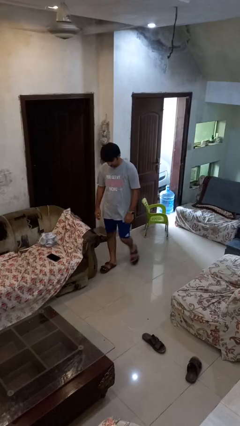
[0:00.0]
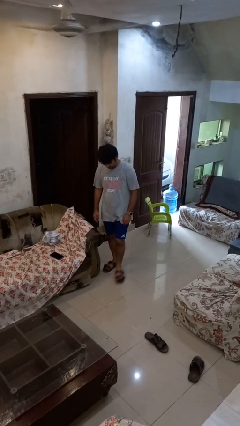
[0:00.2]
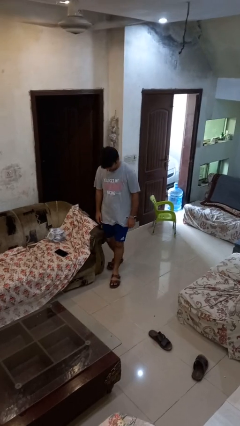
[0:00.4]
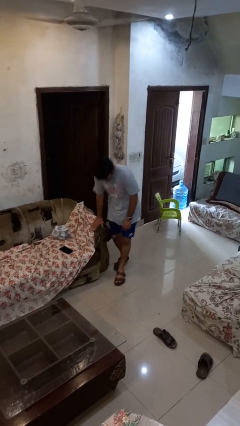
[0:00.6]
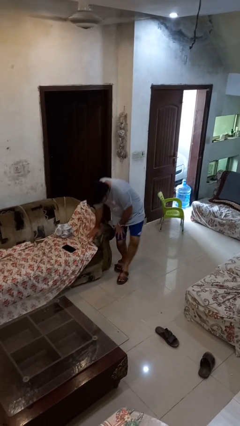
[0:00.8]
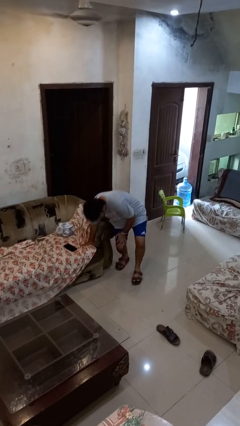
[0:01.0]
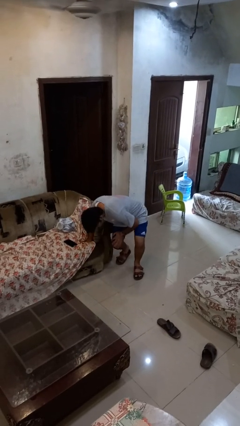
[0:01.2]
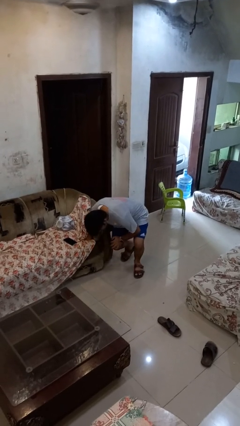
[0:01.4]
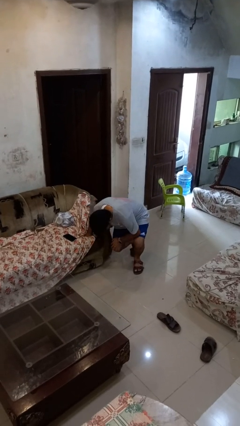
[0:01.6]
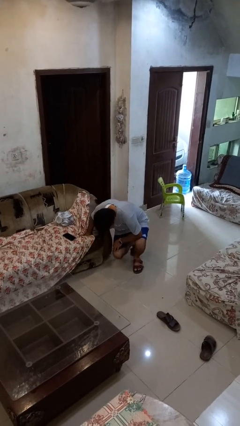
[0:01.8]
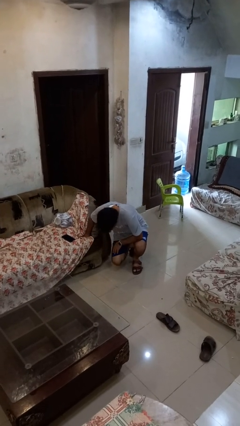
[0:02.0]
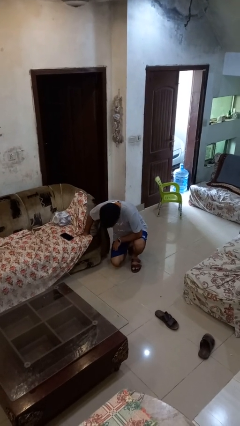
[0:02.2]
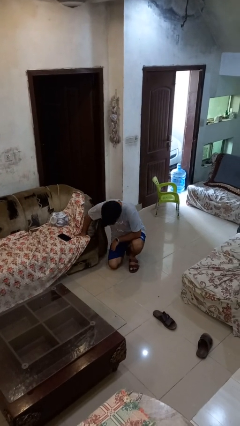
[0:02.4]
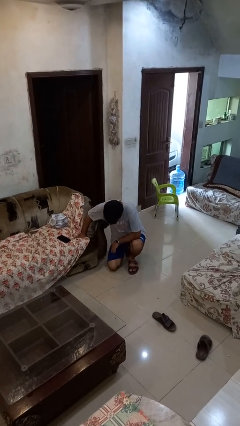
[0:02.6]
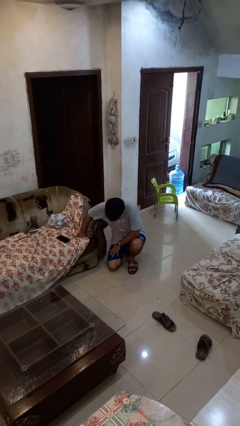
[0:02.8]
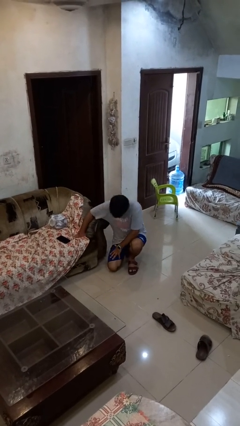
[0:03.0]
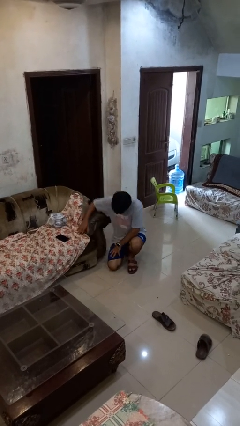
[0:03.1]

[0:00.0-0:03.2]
person trips on object on floor

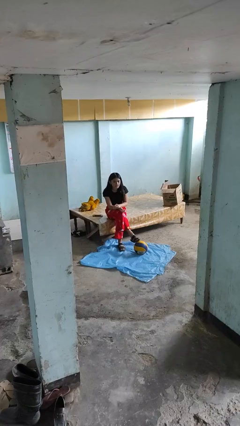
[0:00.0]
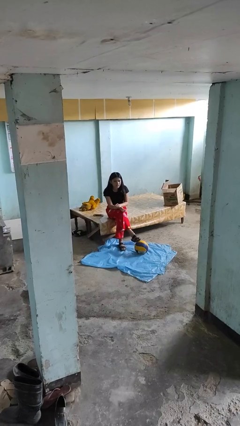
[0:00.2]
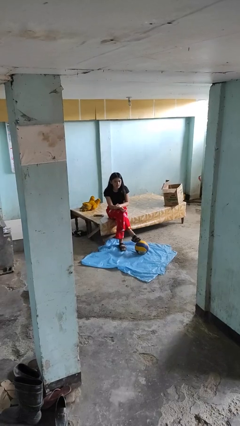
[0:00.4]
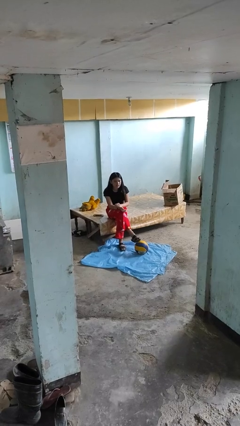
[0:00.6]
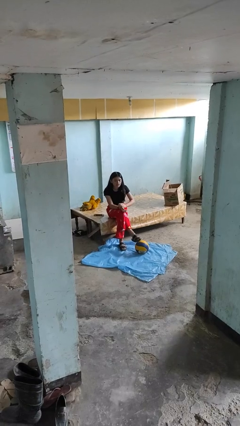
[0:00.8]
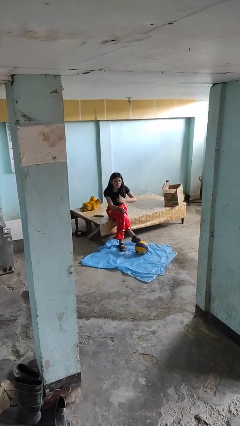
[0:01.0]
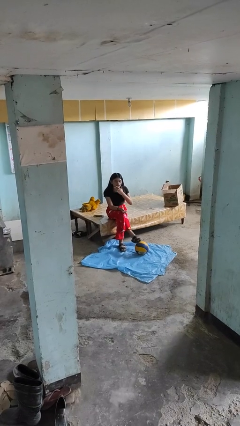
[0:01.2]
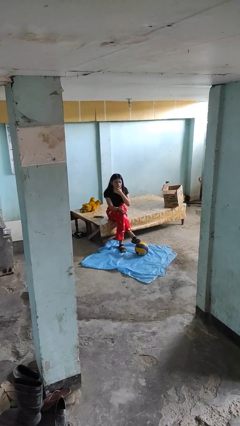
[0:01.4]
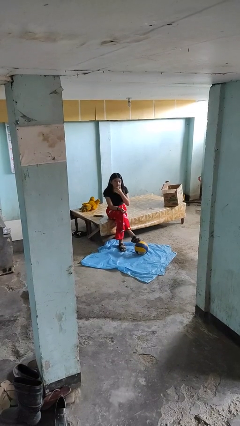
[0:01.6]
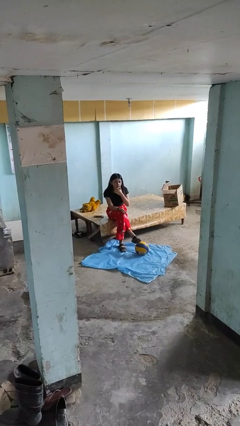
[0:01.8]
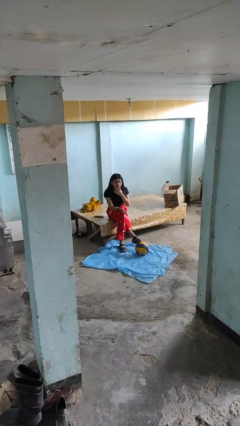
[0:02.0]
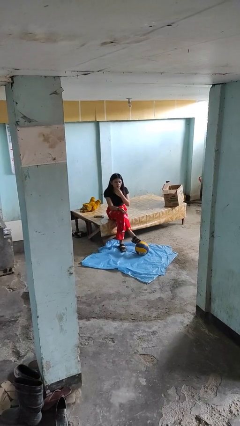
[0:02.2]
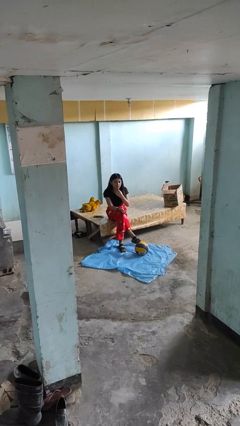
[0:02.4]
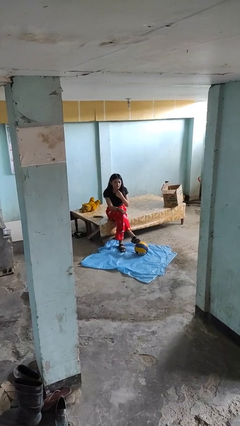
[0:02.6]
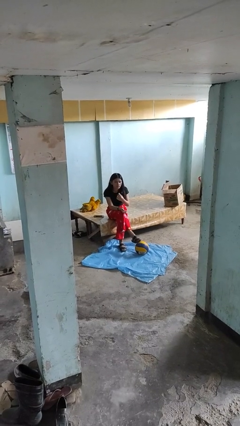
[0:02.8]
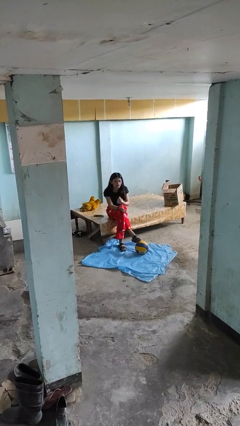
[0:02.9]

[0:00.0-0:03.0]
person strokes chin

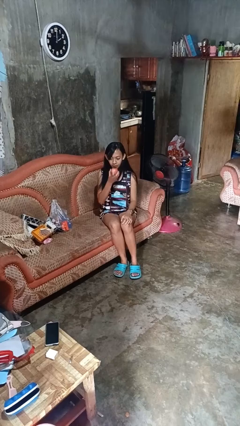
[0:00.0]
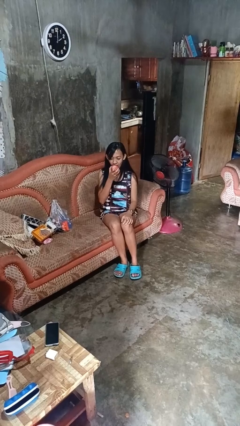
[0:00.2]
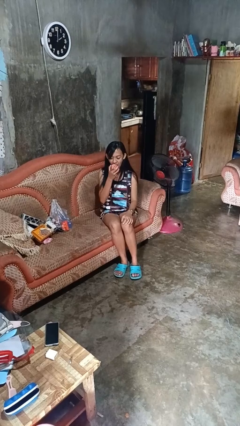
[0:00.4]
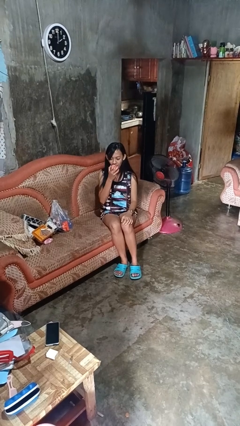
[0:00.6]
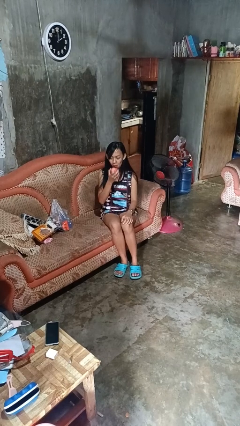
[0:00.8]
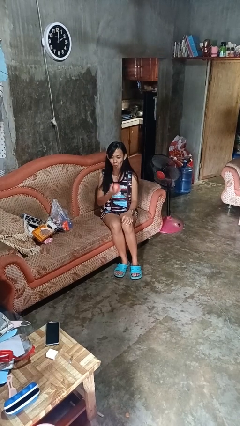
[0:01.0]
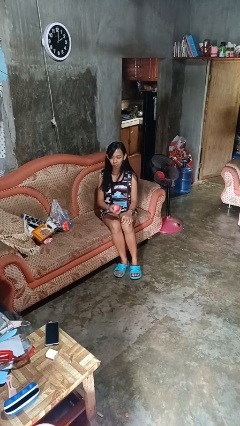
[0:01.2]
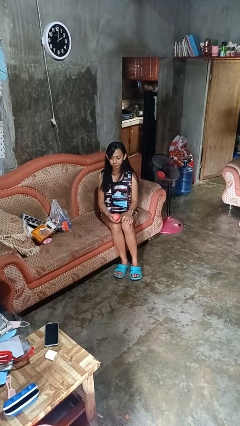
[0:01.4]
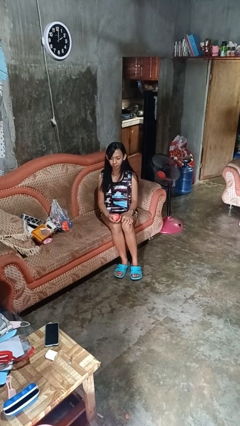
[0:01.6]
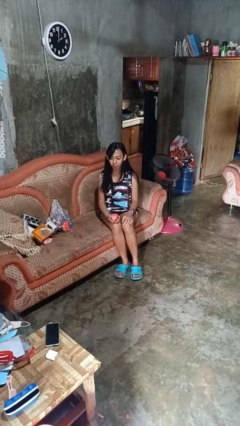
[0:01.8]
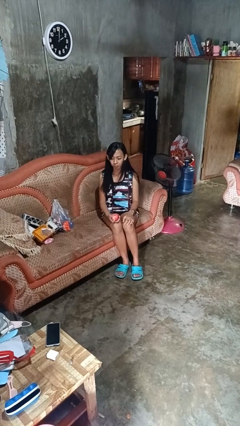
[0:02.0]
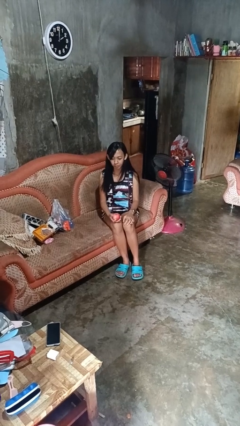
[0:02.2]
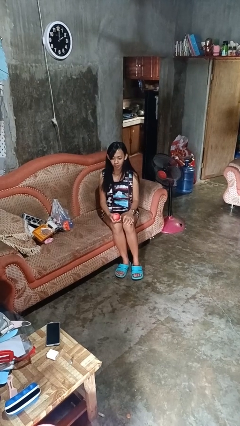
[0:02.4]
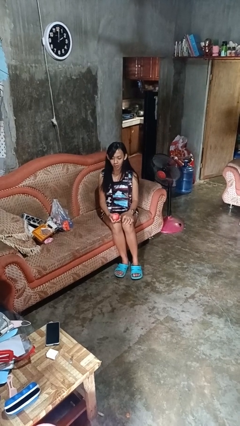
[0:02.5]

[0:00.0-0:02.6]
person eats apple

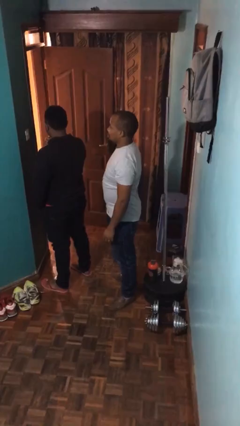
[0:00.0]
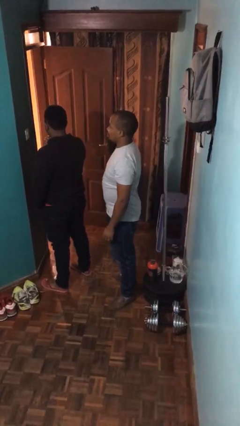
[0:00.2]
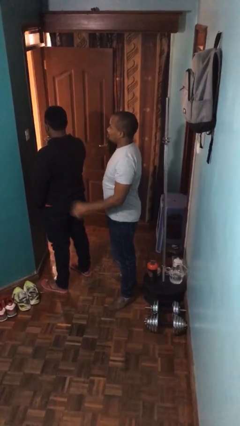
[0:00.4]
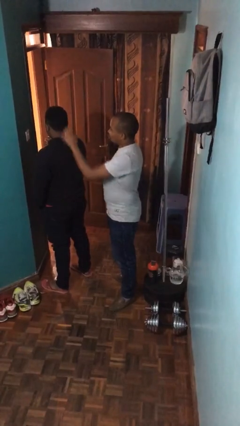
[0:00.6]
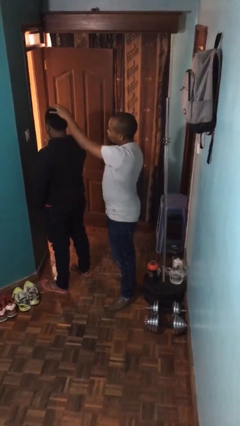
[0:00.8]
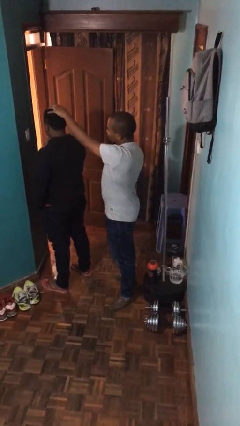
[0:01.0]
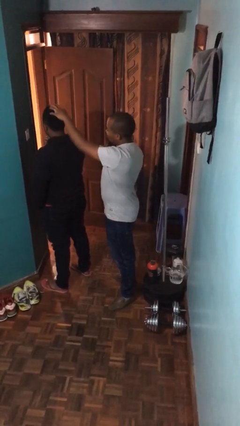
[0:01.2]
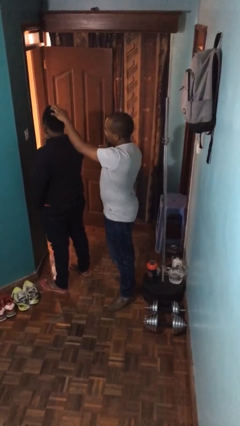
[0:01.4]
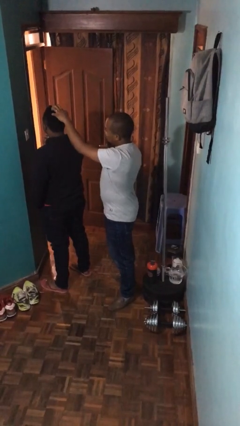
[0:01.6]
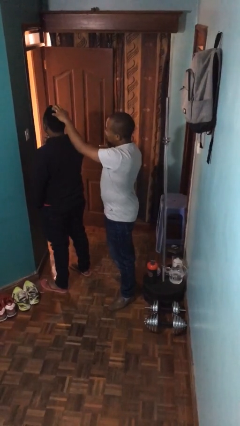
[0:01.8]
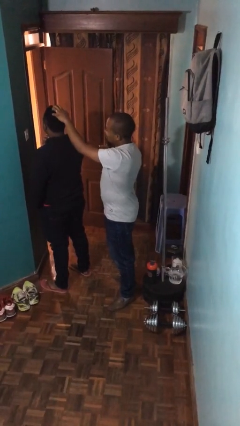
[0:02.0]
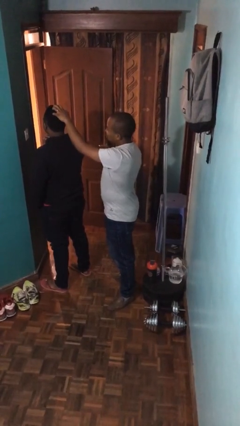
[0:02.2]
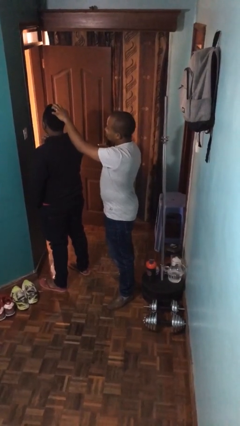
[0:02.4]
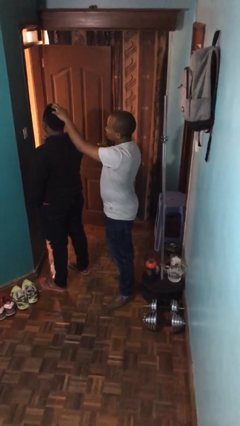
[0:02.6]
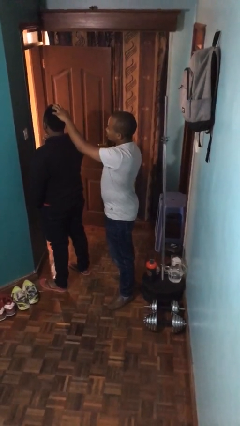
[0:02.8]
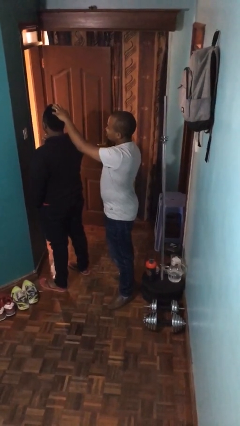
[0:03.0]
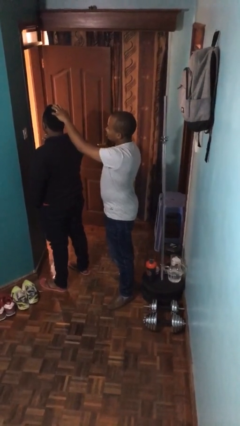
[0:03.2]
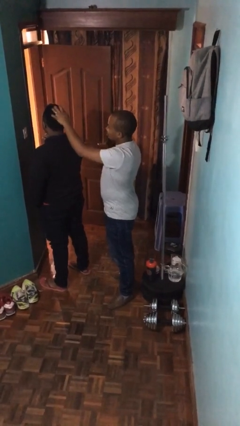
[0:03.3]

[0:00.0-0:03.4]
person grabs person by hair

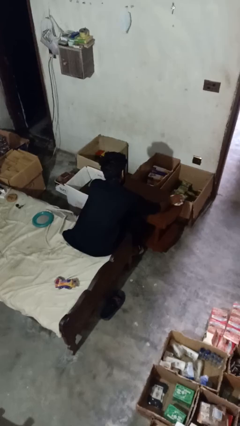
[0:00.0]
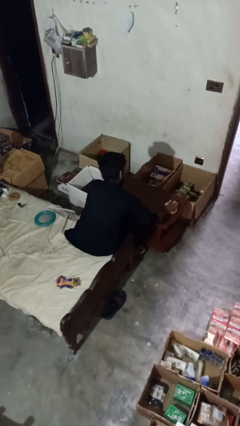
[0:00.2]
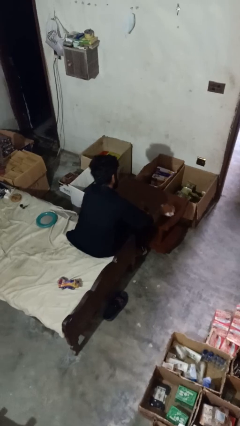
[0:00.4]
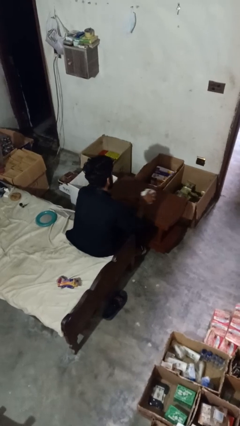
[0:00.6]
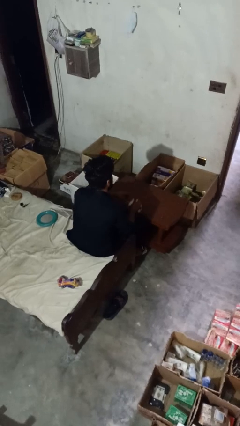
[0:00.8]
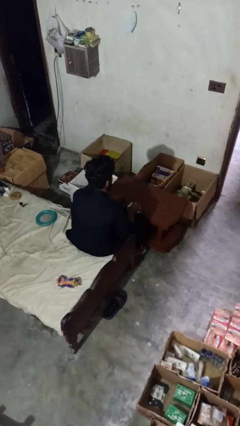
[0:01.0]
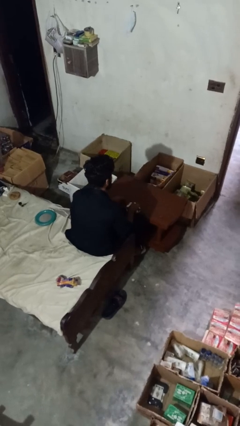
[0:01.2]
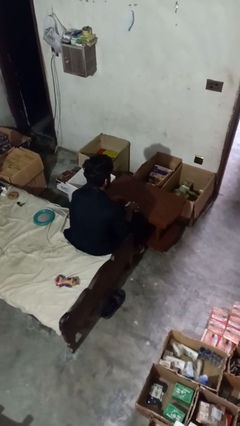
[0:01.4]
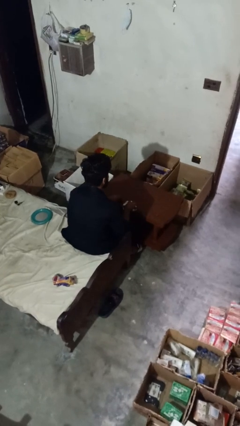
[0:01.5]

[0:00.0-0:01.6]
person cleans table with rag

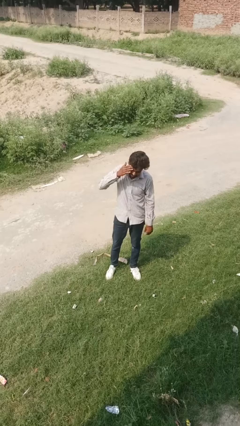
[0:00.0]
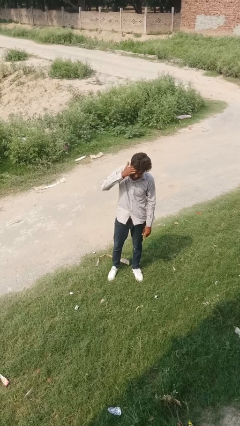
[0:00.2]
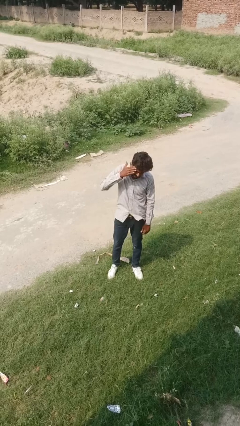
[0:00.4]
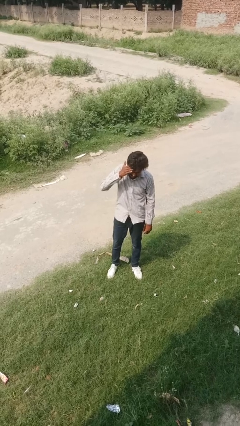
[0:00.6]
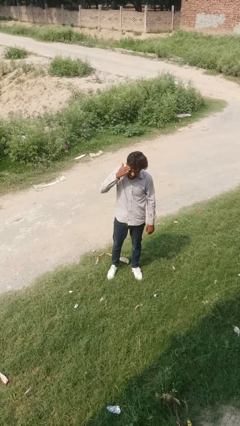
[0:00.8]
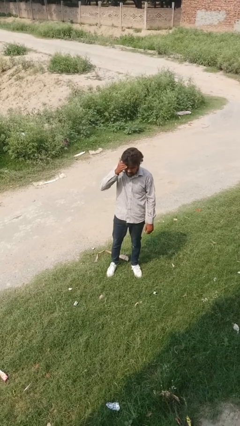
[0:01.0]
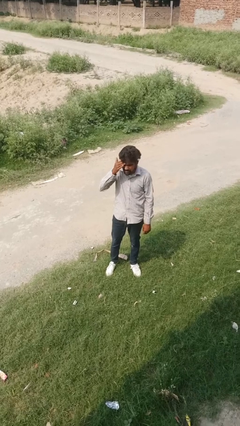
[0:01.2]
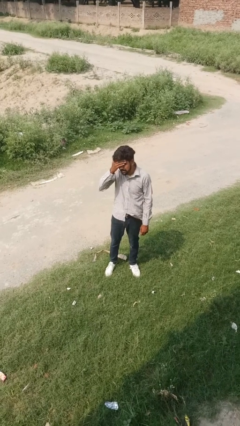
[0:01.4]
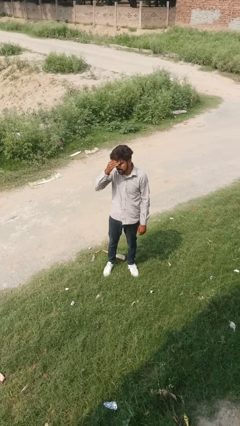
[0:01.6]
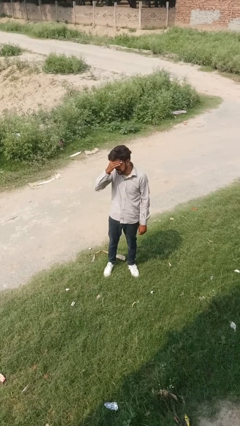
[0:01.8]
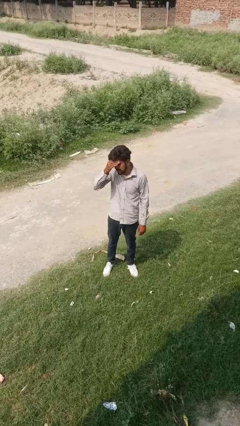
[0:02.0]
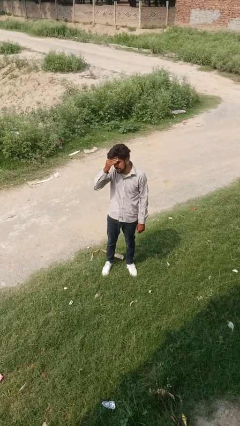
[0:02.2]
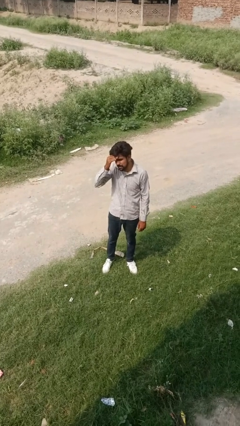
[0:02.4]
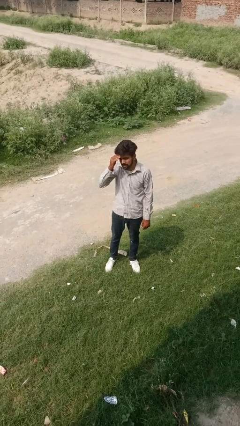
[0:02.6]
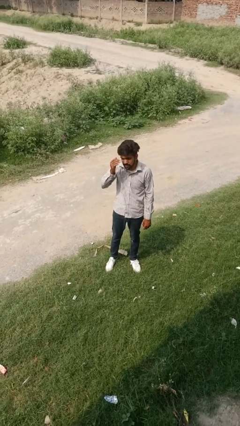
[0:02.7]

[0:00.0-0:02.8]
person scratches face

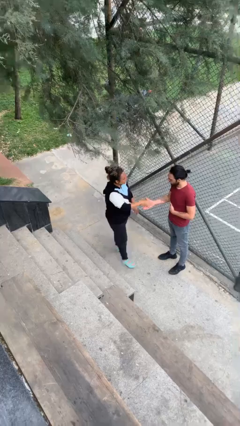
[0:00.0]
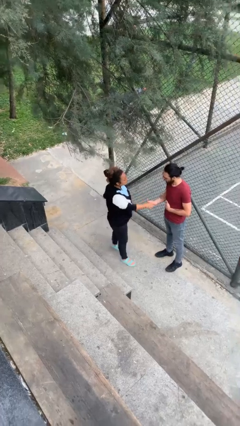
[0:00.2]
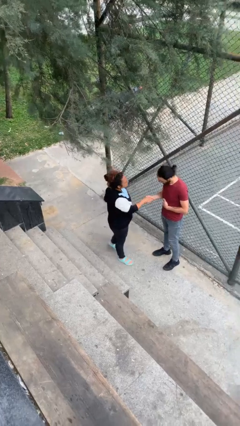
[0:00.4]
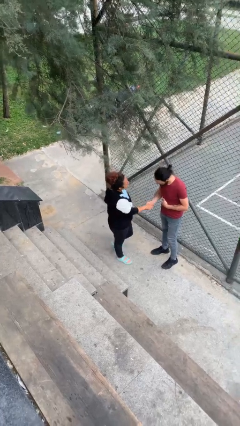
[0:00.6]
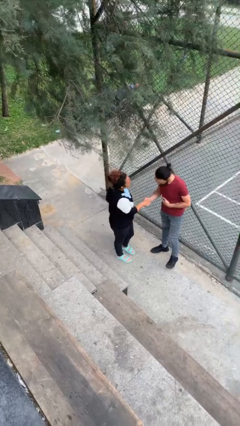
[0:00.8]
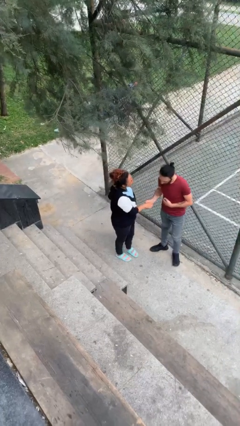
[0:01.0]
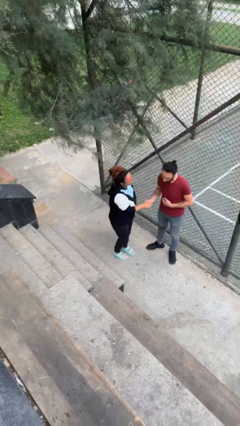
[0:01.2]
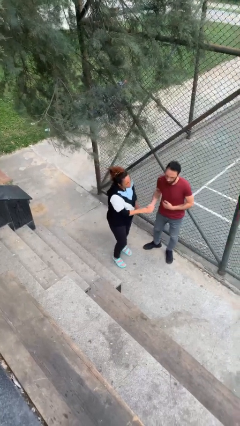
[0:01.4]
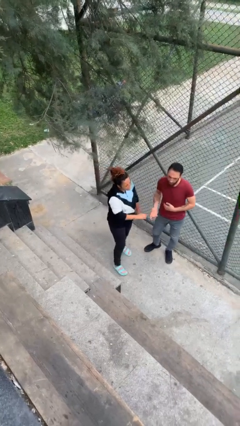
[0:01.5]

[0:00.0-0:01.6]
person shakes hand
